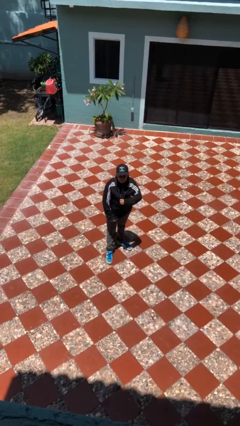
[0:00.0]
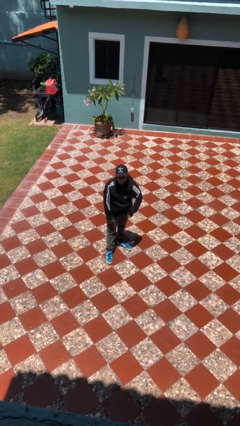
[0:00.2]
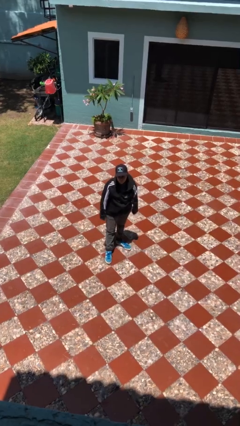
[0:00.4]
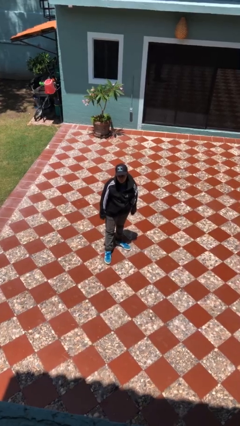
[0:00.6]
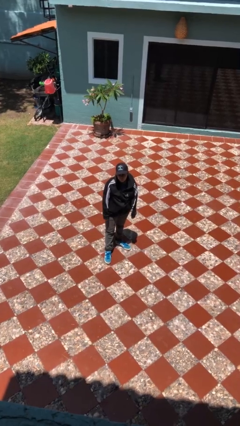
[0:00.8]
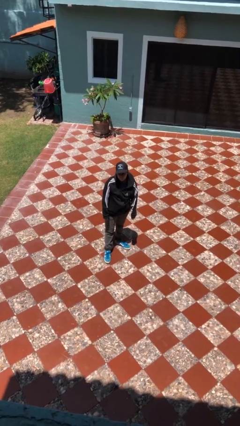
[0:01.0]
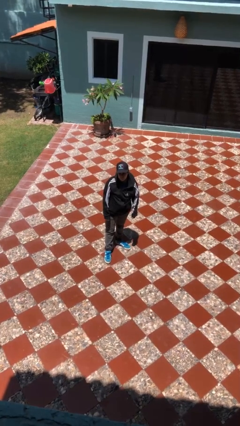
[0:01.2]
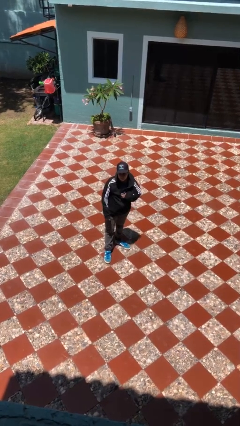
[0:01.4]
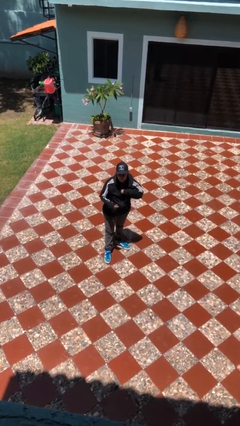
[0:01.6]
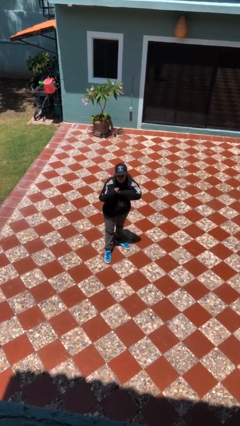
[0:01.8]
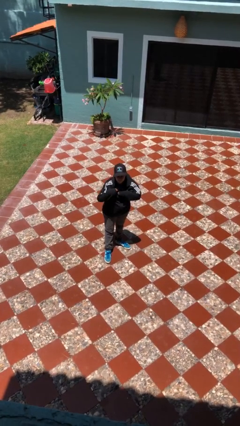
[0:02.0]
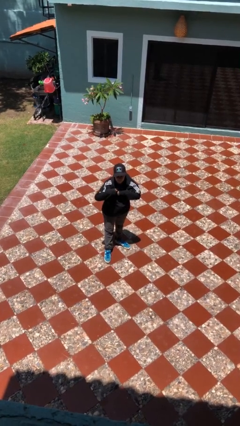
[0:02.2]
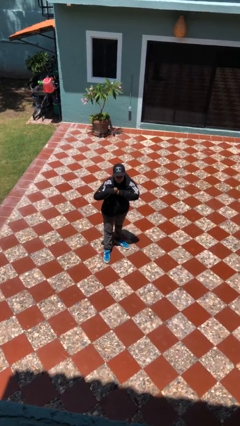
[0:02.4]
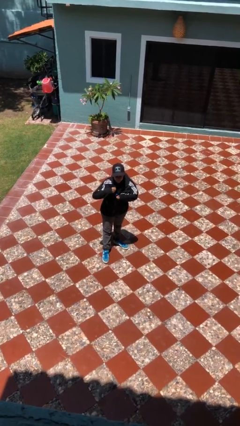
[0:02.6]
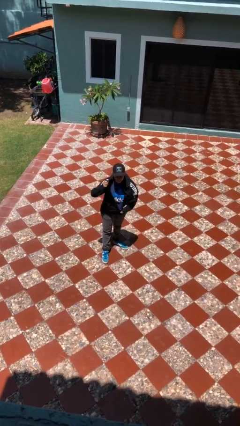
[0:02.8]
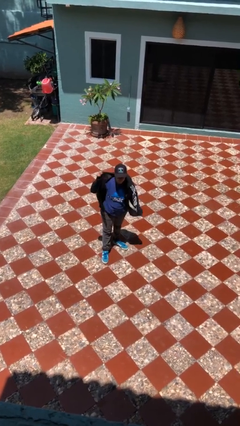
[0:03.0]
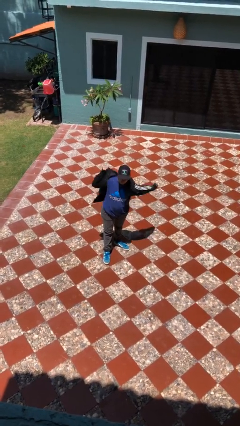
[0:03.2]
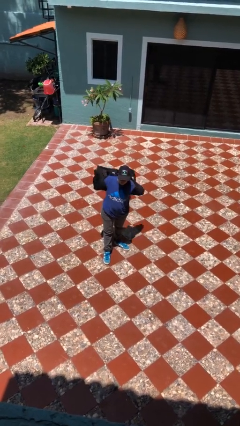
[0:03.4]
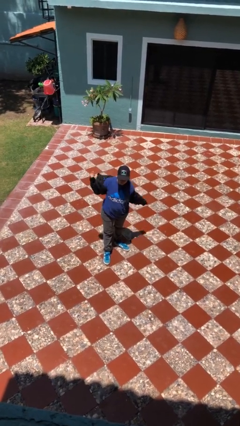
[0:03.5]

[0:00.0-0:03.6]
person unzips jacket

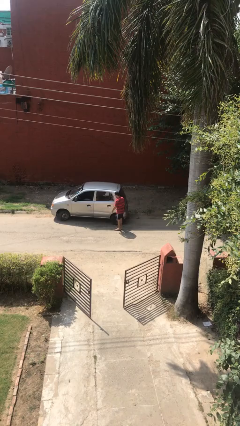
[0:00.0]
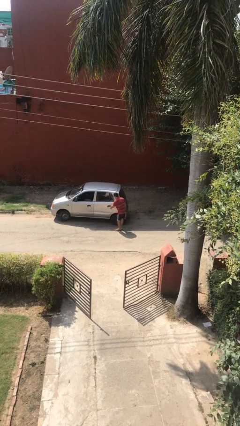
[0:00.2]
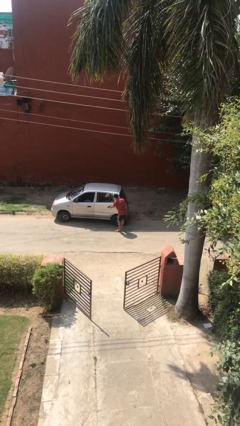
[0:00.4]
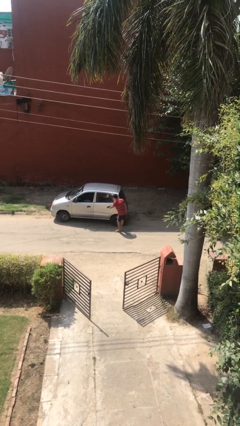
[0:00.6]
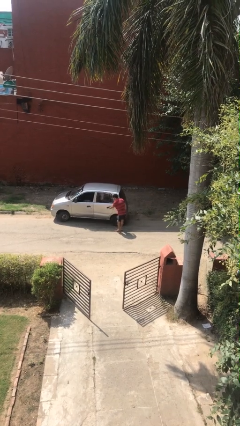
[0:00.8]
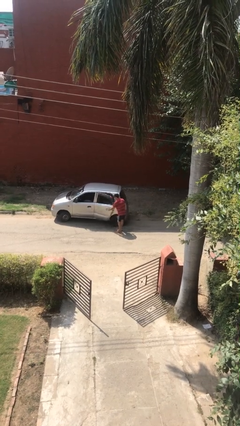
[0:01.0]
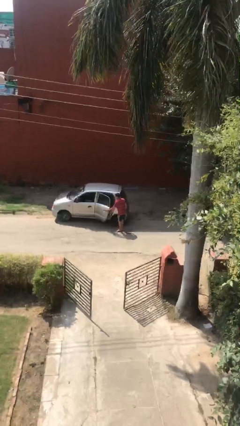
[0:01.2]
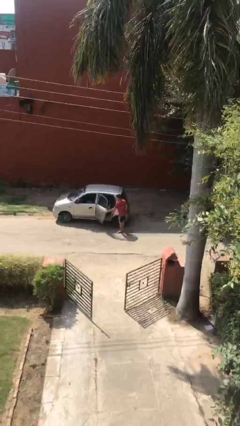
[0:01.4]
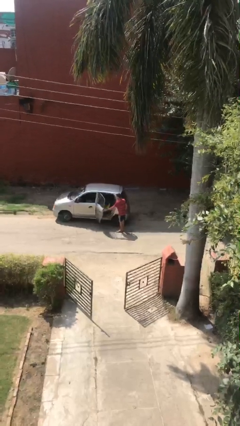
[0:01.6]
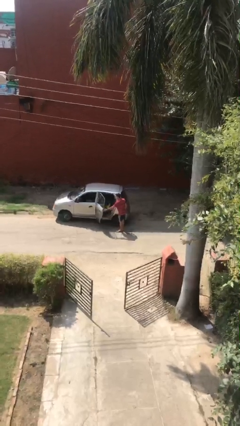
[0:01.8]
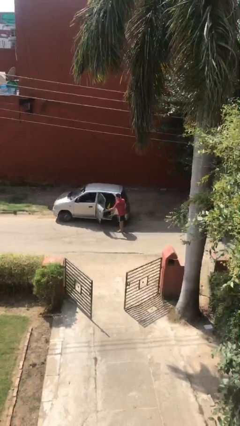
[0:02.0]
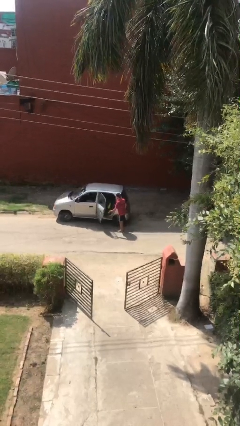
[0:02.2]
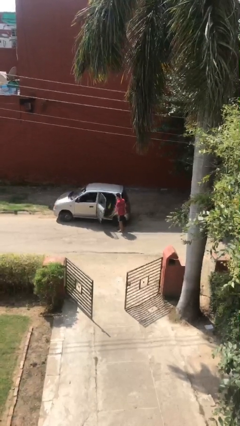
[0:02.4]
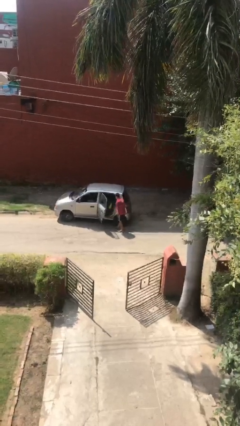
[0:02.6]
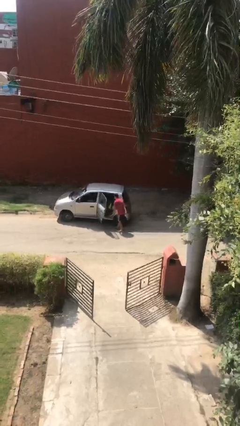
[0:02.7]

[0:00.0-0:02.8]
person opens car door

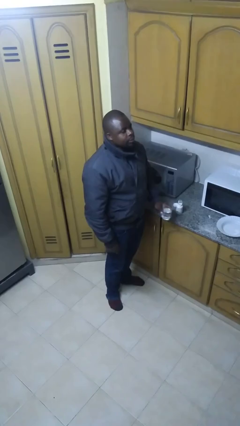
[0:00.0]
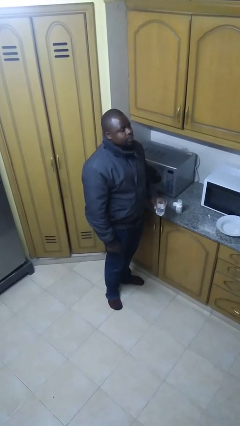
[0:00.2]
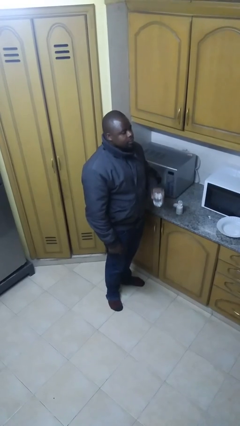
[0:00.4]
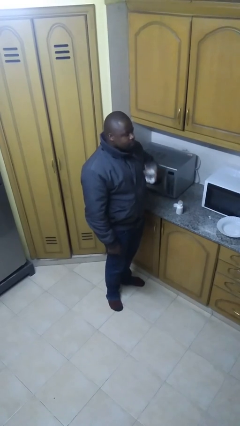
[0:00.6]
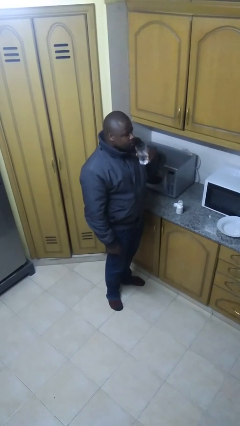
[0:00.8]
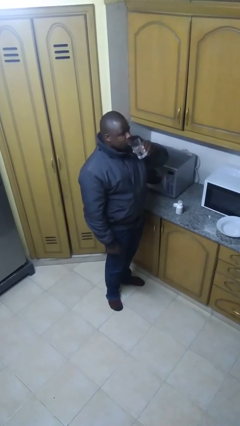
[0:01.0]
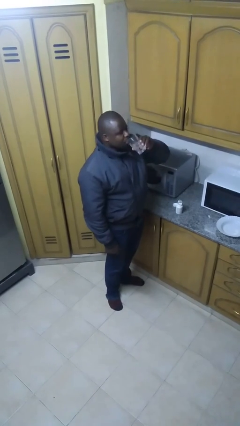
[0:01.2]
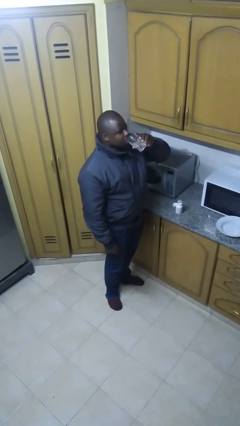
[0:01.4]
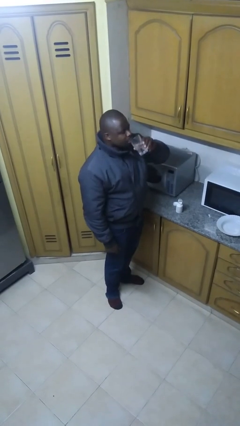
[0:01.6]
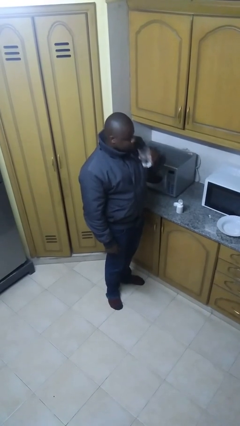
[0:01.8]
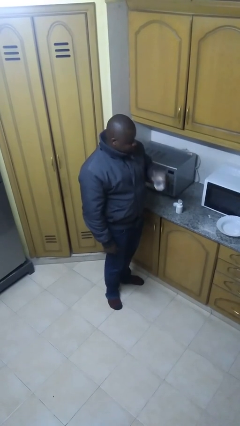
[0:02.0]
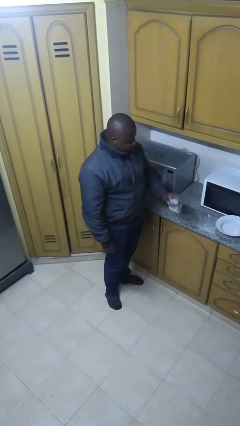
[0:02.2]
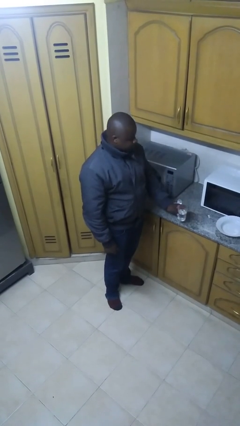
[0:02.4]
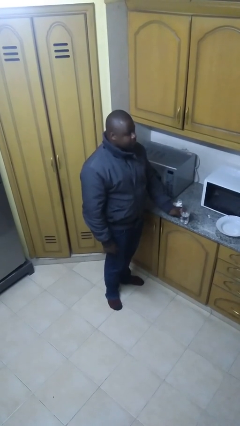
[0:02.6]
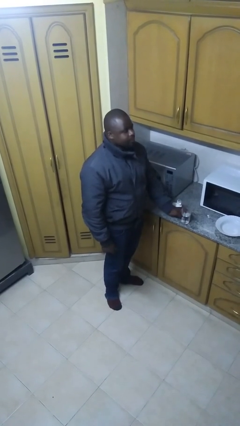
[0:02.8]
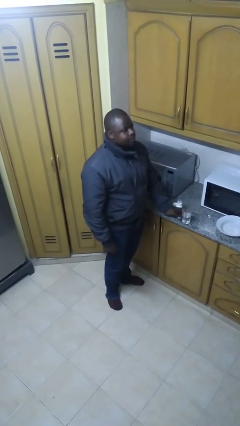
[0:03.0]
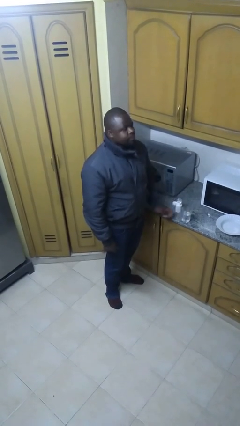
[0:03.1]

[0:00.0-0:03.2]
person drinks from cup

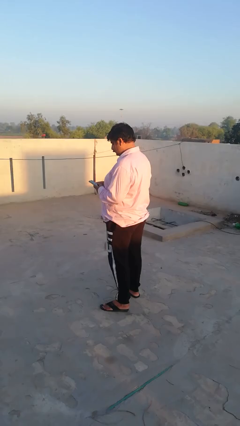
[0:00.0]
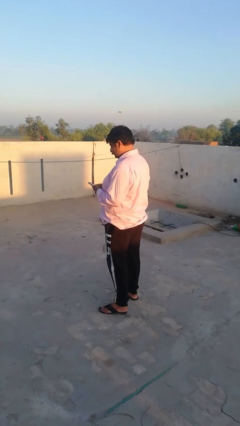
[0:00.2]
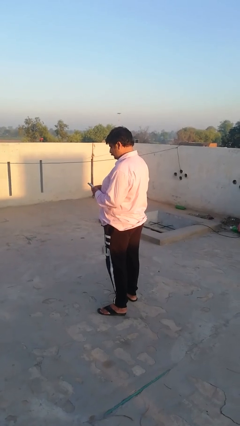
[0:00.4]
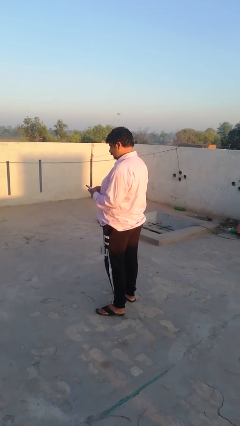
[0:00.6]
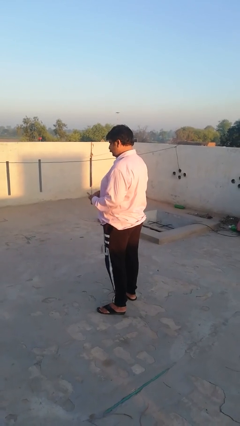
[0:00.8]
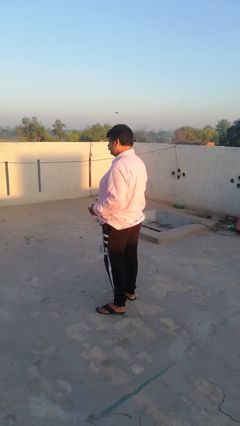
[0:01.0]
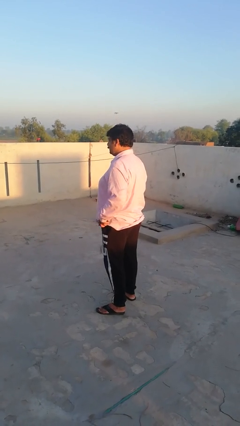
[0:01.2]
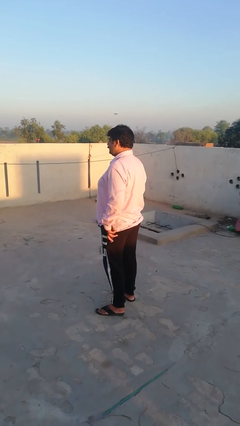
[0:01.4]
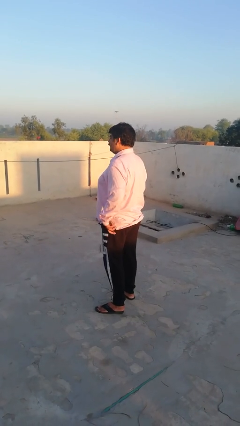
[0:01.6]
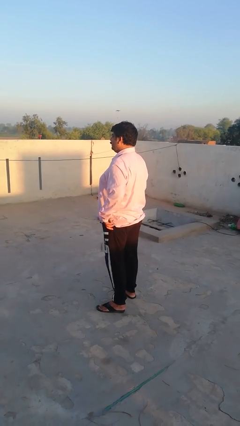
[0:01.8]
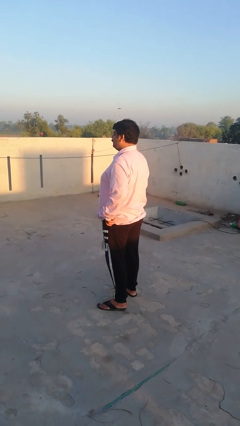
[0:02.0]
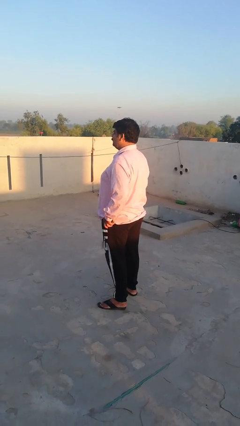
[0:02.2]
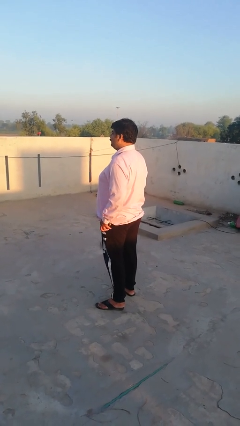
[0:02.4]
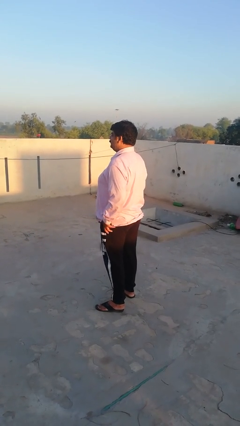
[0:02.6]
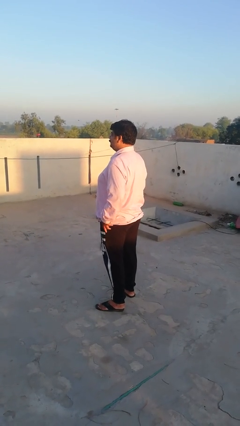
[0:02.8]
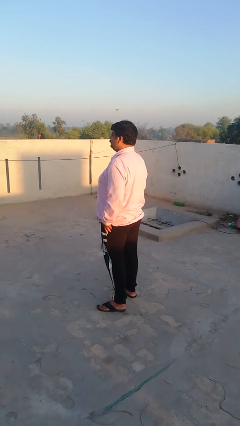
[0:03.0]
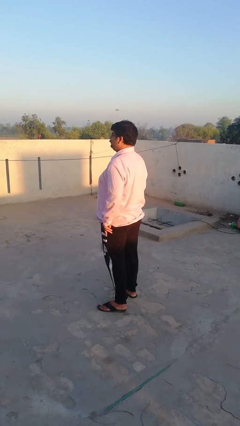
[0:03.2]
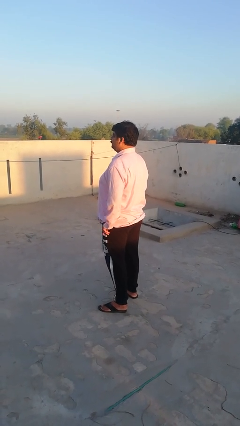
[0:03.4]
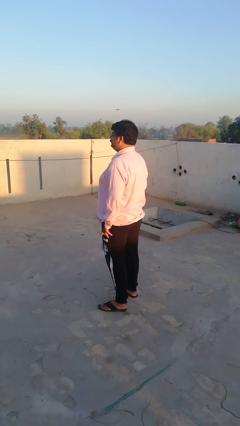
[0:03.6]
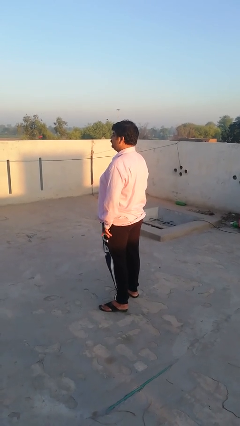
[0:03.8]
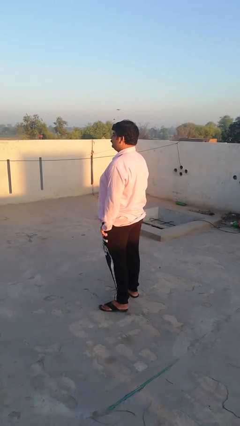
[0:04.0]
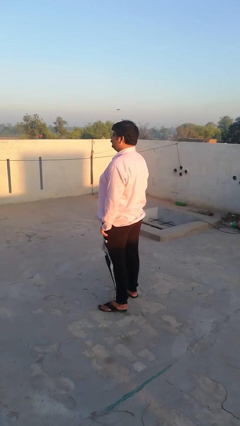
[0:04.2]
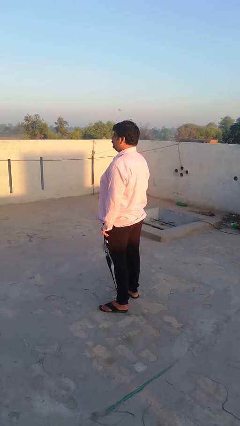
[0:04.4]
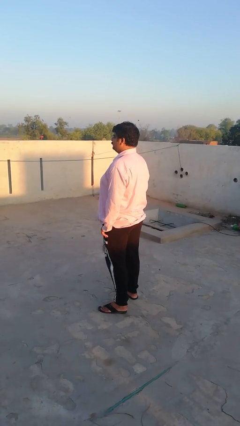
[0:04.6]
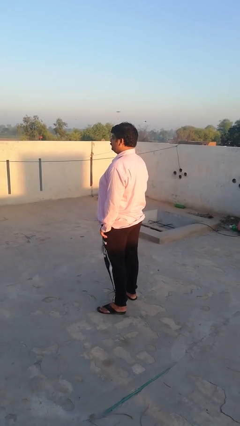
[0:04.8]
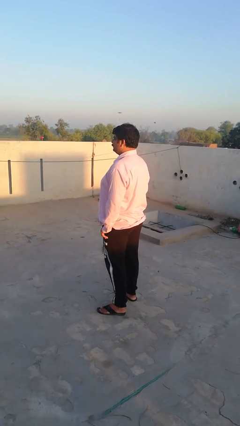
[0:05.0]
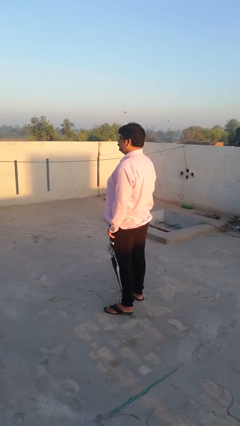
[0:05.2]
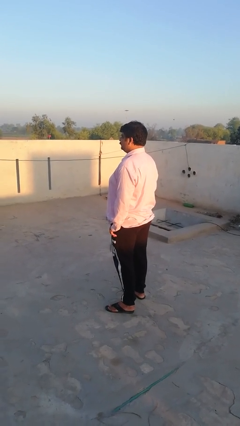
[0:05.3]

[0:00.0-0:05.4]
person puts phone into pocket

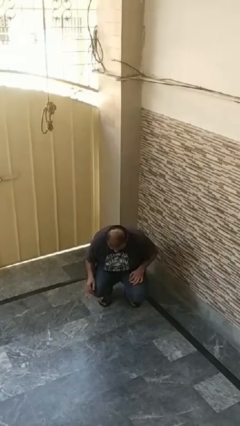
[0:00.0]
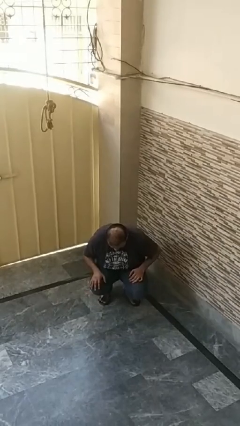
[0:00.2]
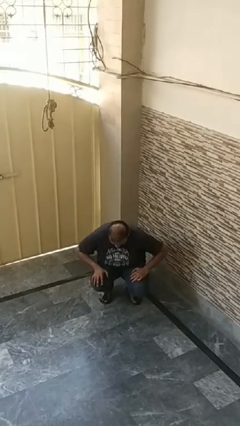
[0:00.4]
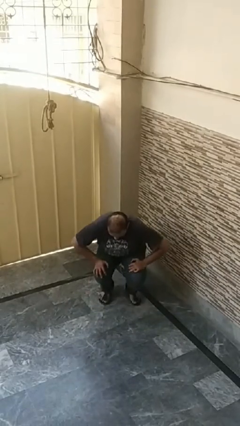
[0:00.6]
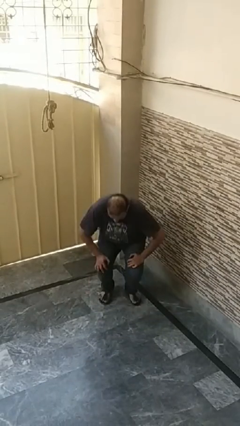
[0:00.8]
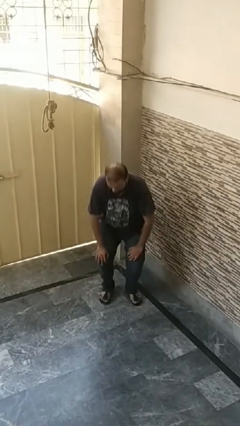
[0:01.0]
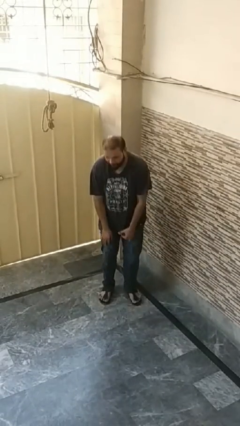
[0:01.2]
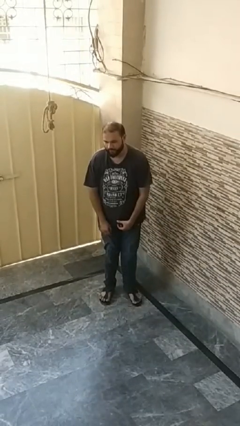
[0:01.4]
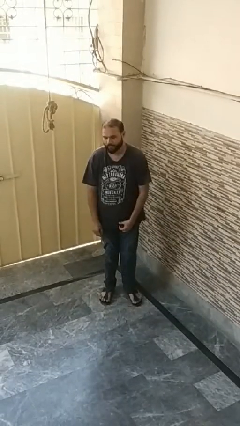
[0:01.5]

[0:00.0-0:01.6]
person stands up from floor

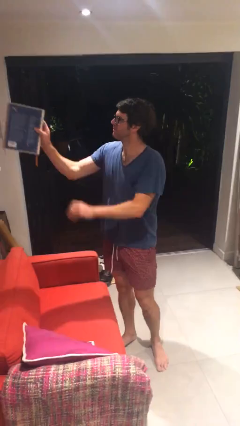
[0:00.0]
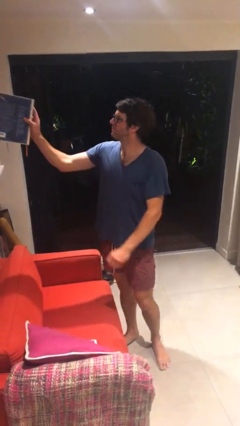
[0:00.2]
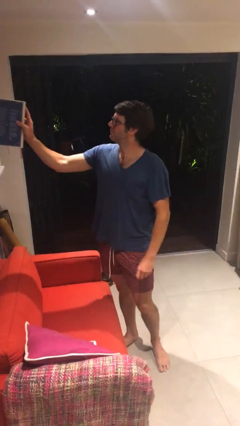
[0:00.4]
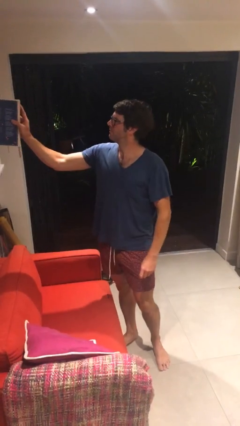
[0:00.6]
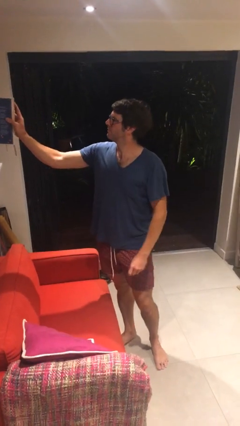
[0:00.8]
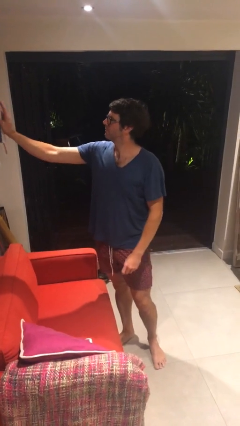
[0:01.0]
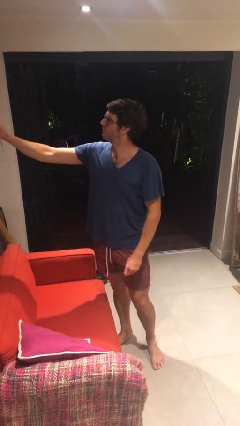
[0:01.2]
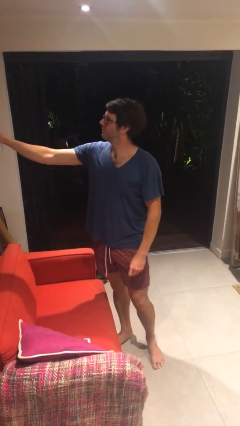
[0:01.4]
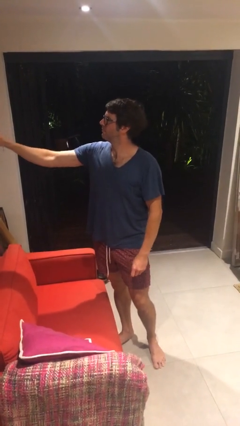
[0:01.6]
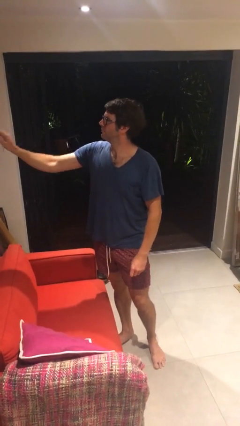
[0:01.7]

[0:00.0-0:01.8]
person puts down object on shelf
